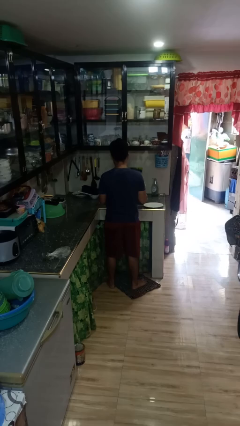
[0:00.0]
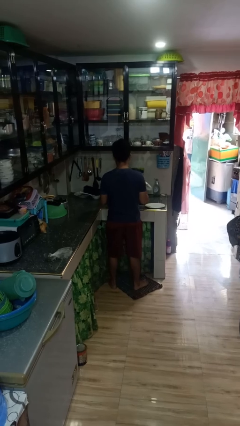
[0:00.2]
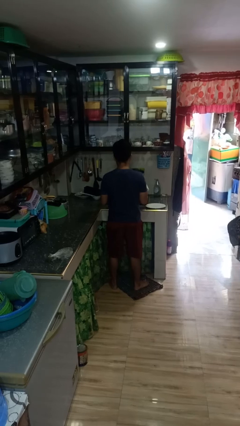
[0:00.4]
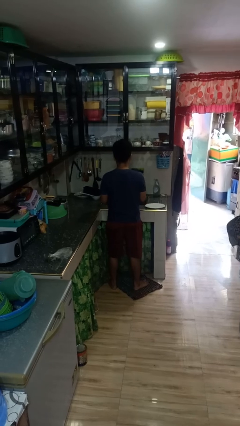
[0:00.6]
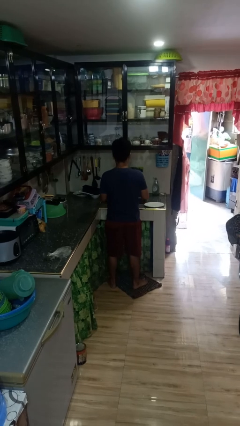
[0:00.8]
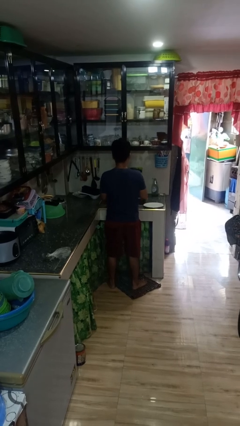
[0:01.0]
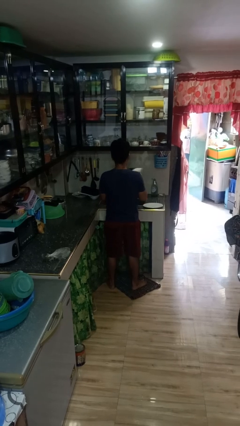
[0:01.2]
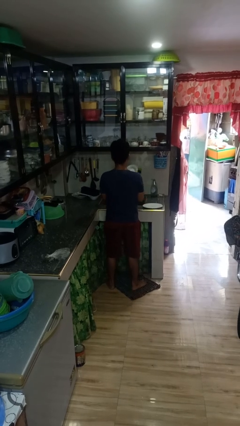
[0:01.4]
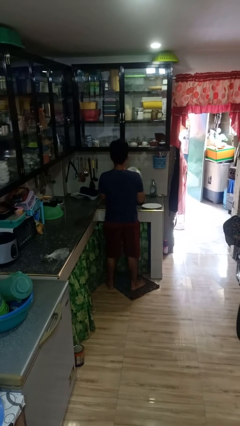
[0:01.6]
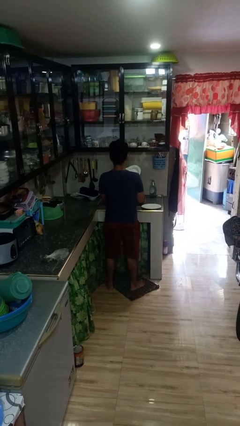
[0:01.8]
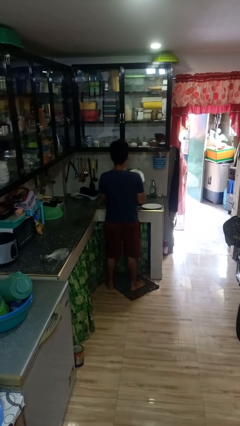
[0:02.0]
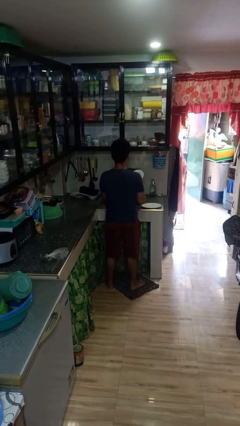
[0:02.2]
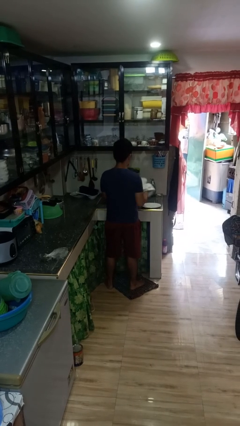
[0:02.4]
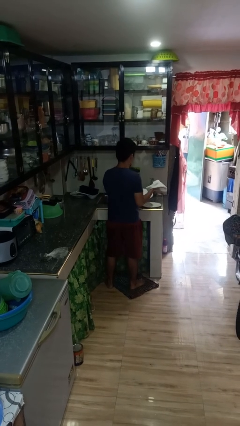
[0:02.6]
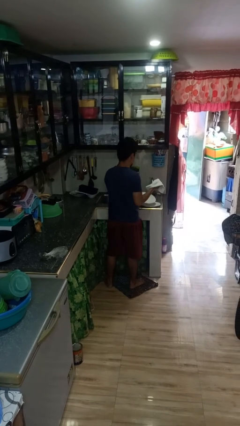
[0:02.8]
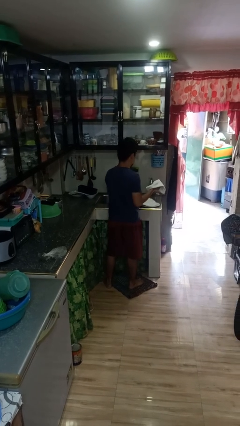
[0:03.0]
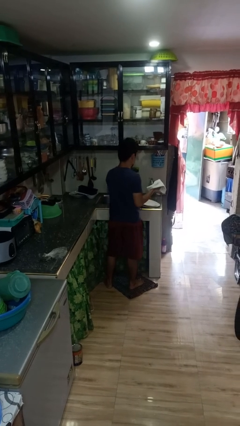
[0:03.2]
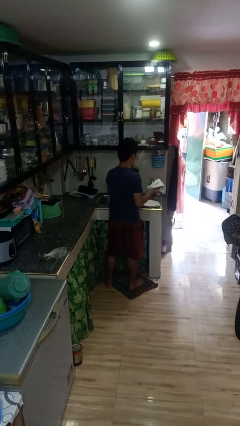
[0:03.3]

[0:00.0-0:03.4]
person dries dish

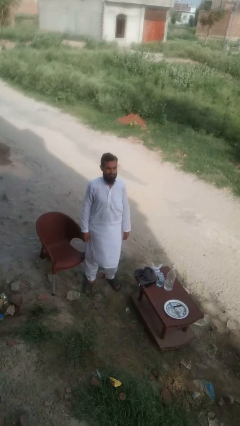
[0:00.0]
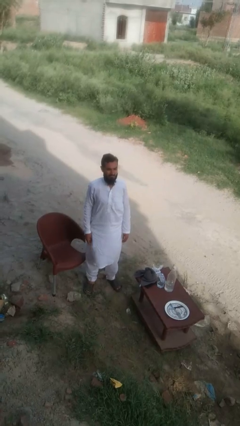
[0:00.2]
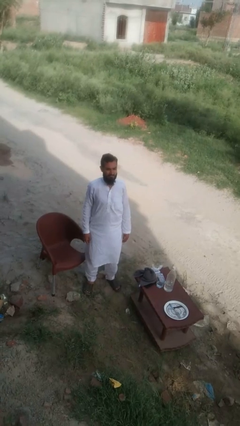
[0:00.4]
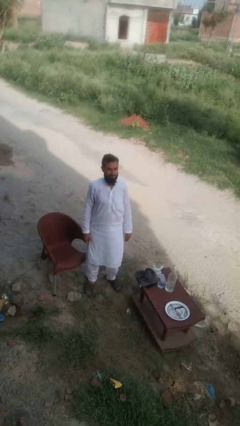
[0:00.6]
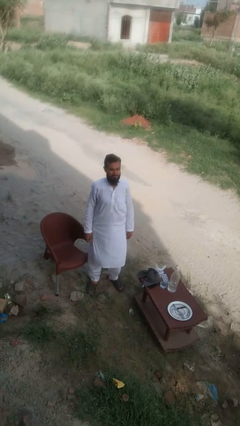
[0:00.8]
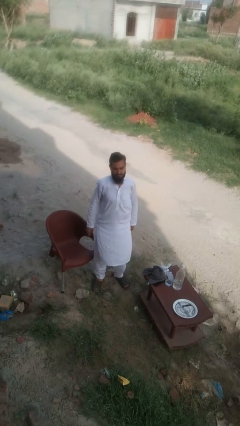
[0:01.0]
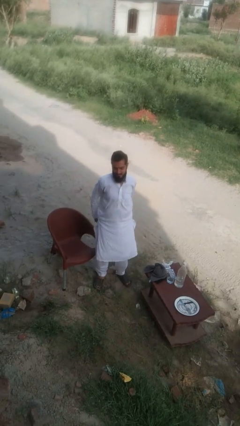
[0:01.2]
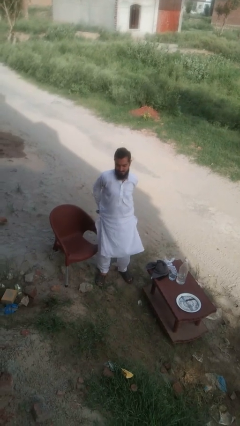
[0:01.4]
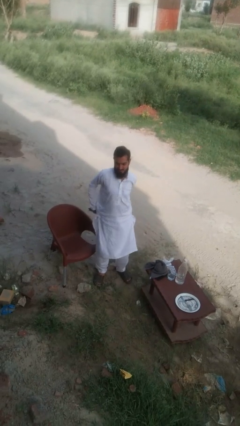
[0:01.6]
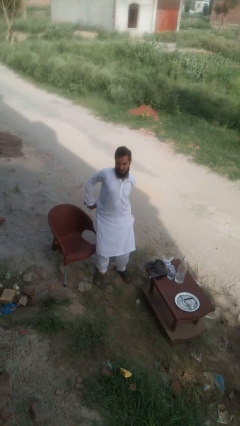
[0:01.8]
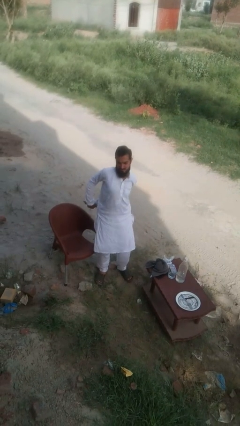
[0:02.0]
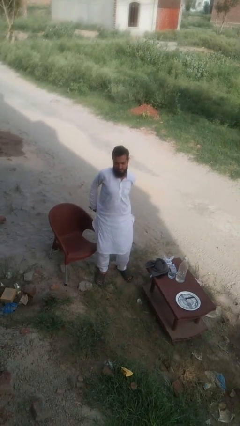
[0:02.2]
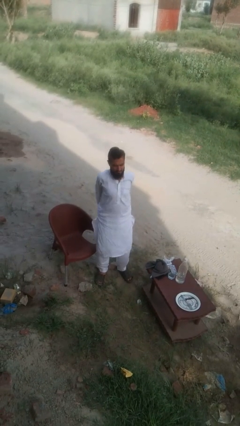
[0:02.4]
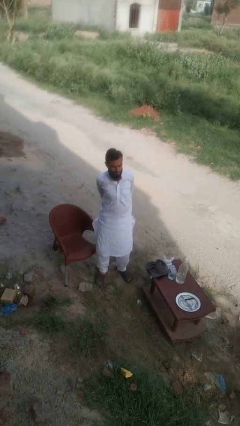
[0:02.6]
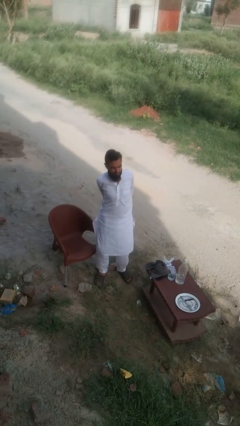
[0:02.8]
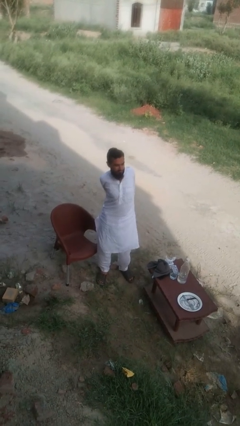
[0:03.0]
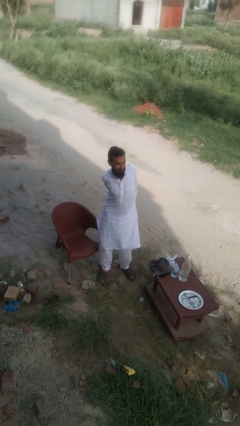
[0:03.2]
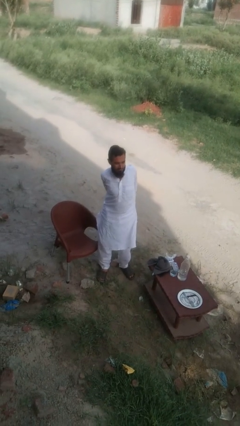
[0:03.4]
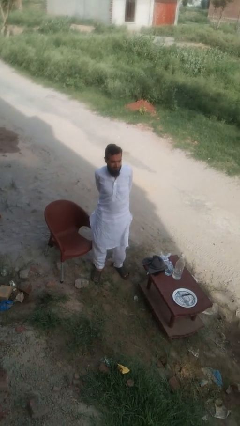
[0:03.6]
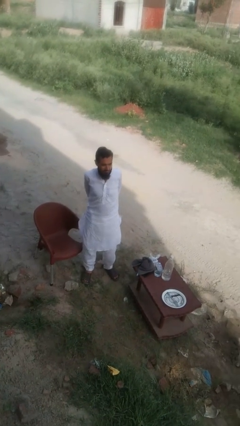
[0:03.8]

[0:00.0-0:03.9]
person stretches back

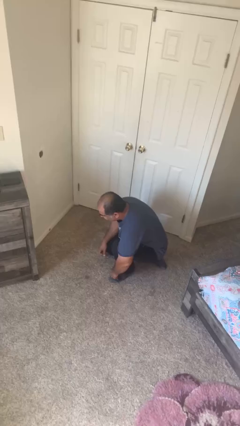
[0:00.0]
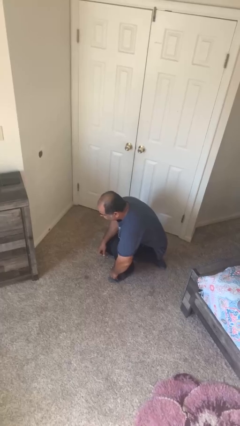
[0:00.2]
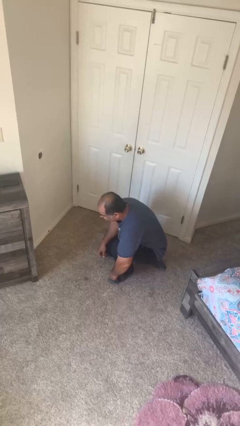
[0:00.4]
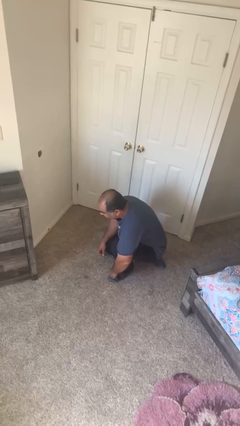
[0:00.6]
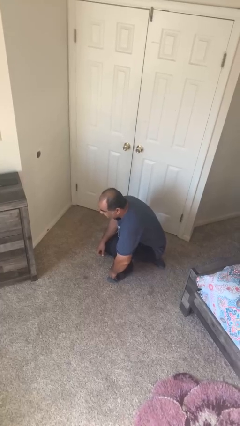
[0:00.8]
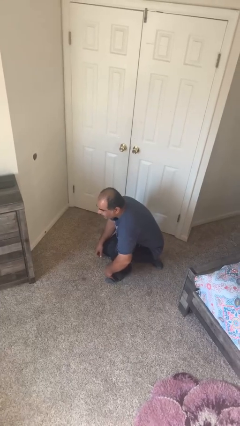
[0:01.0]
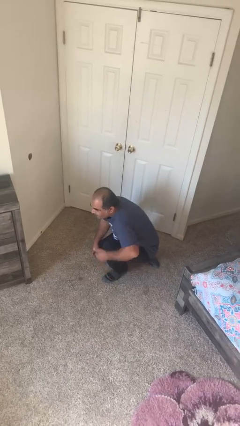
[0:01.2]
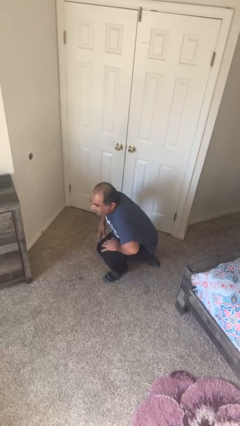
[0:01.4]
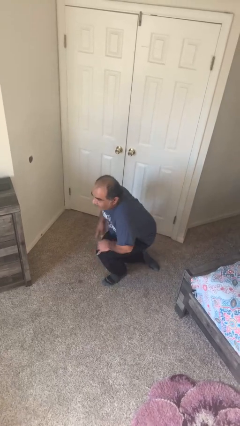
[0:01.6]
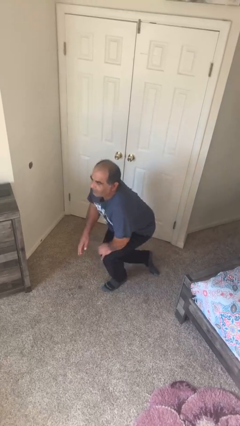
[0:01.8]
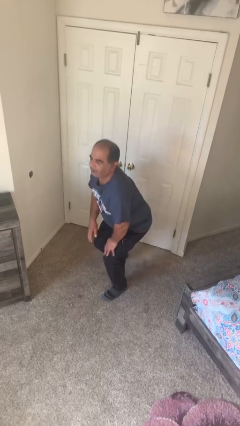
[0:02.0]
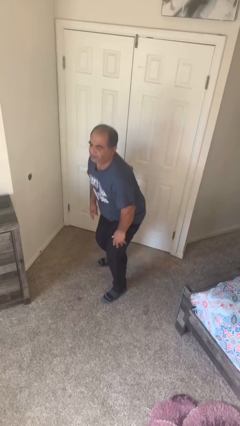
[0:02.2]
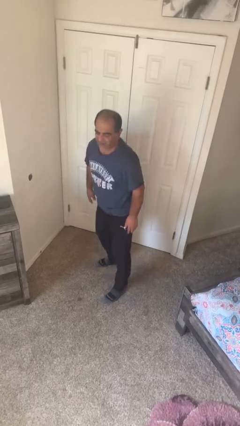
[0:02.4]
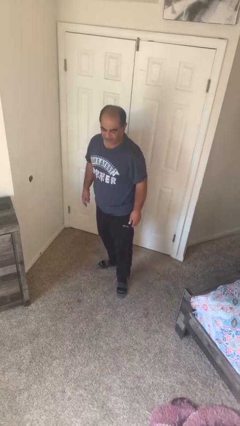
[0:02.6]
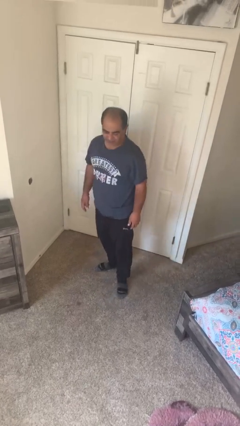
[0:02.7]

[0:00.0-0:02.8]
person stands up

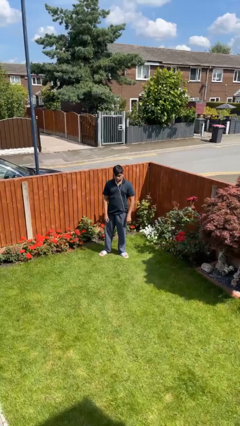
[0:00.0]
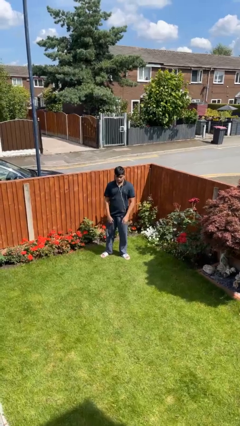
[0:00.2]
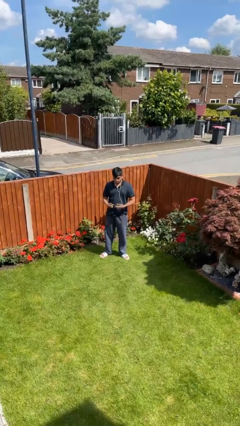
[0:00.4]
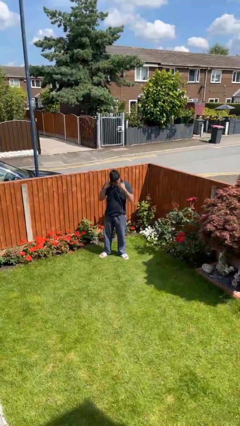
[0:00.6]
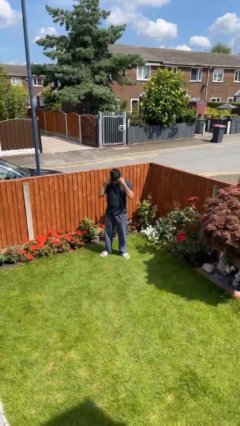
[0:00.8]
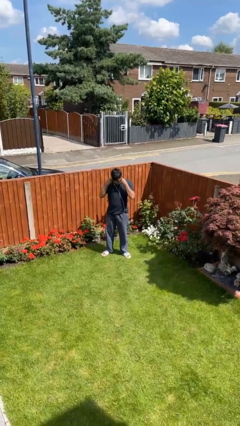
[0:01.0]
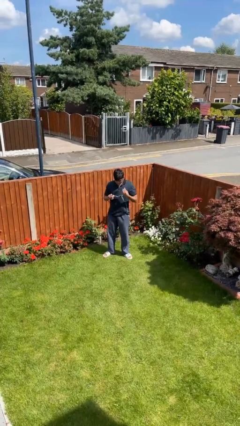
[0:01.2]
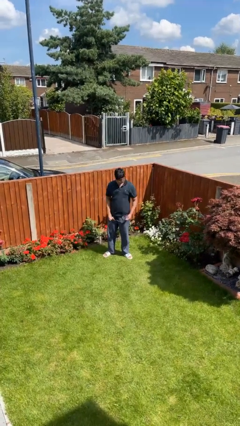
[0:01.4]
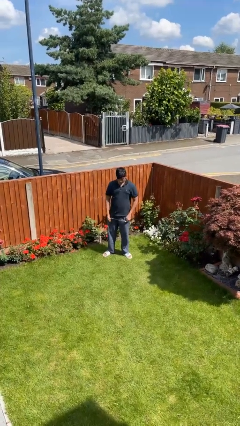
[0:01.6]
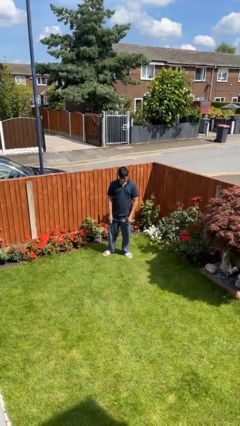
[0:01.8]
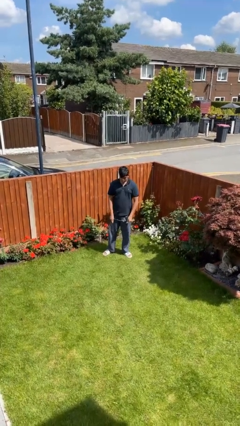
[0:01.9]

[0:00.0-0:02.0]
person takes off headphones

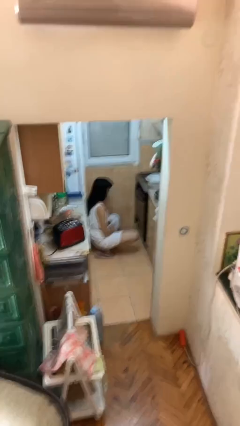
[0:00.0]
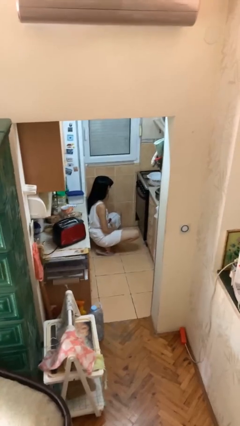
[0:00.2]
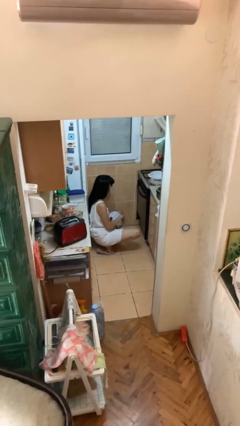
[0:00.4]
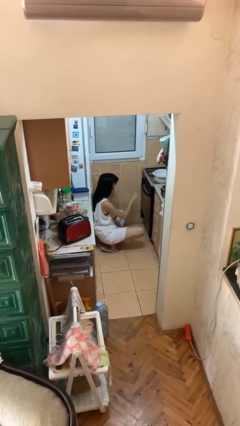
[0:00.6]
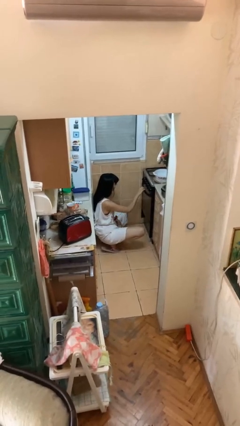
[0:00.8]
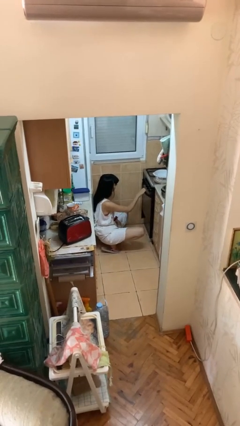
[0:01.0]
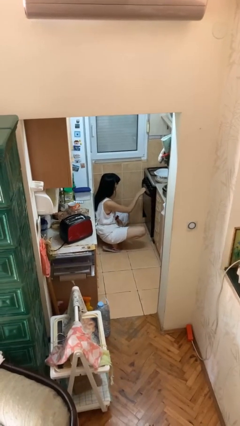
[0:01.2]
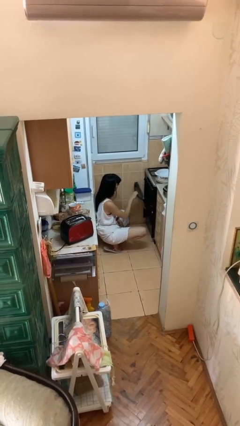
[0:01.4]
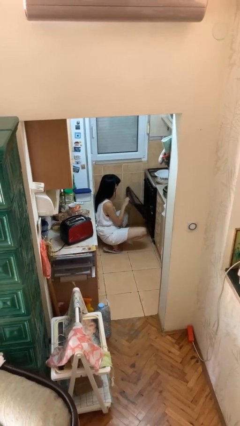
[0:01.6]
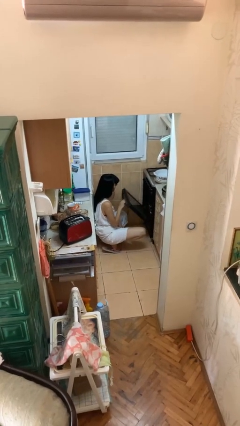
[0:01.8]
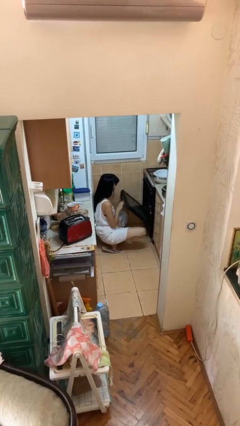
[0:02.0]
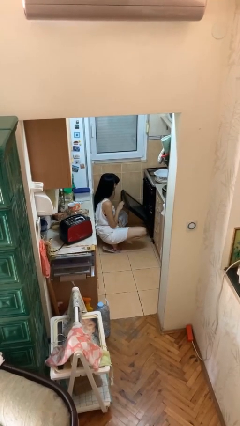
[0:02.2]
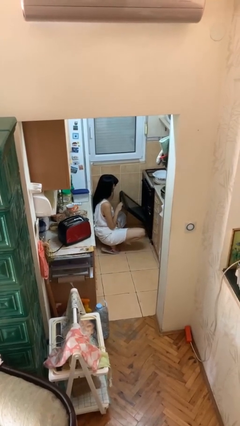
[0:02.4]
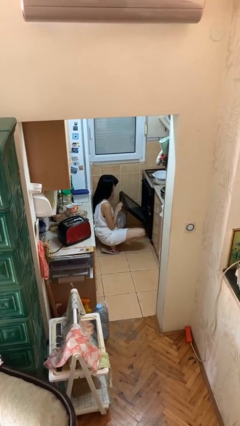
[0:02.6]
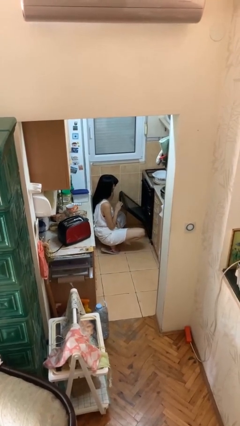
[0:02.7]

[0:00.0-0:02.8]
person opens oven door

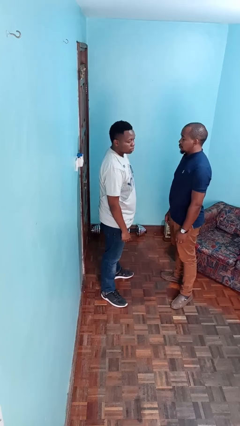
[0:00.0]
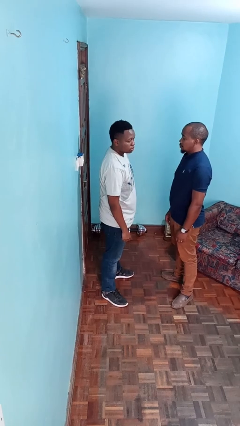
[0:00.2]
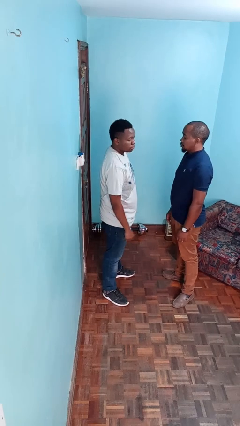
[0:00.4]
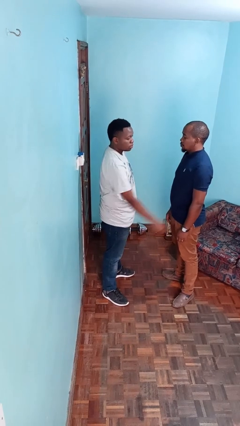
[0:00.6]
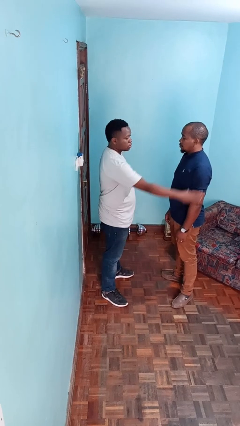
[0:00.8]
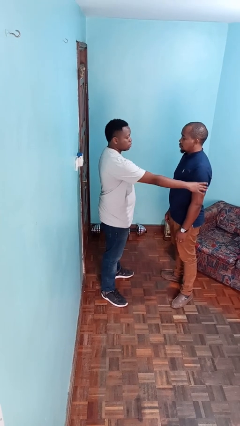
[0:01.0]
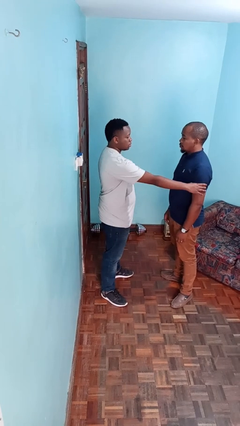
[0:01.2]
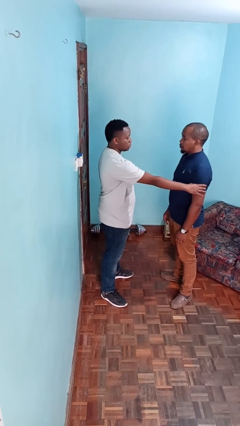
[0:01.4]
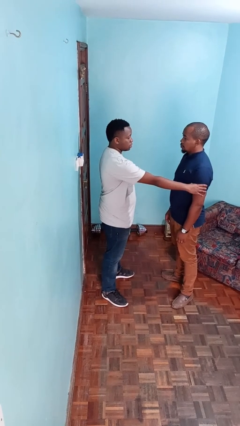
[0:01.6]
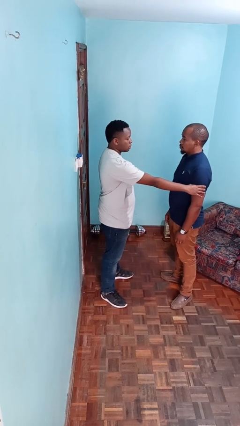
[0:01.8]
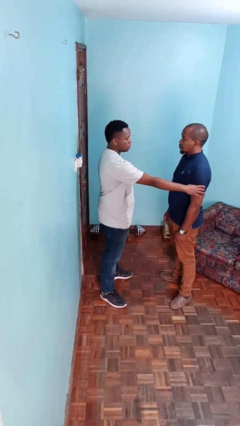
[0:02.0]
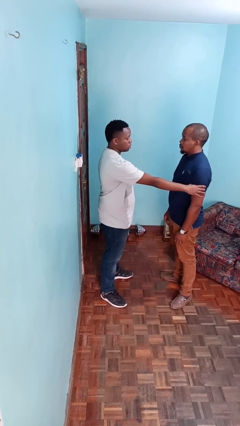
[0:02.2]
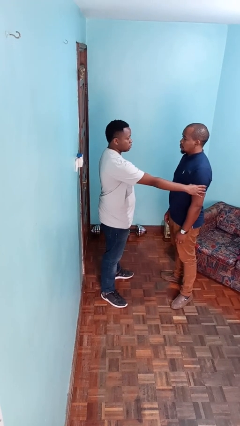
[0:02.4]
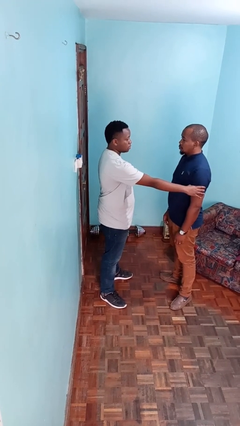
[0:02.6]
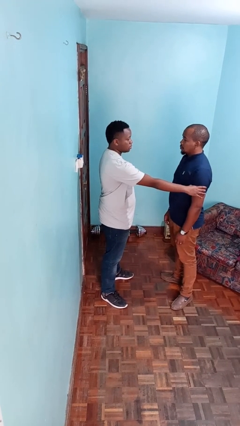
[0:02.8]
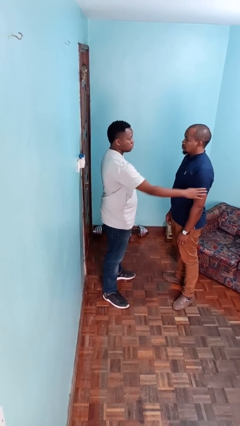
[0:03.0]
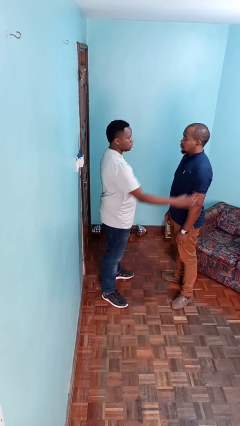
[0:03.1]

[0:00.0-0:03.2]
person grabs person by bicep
